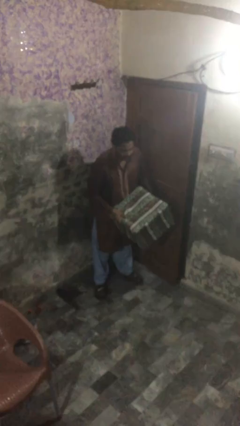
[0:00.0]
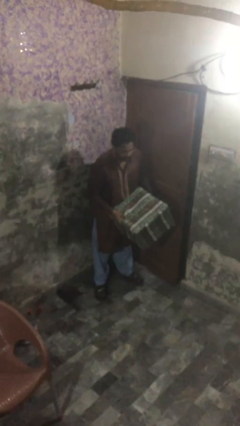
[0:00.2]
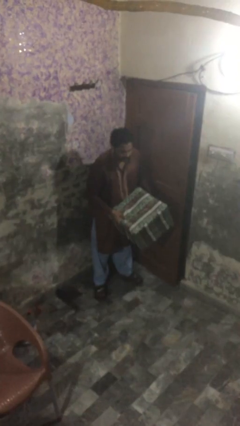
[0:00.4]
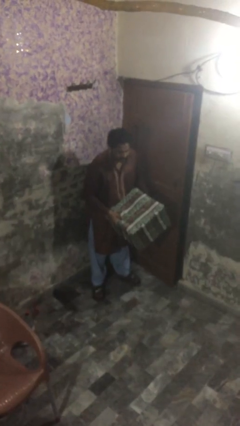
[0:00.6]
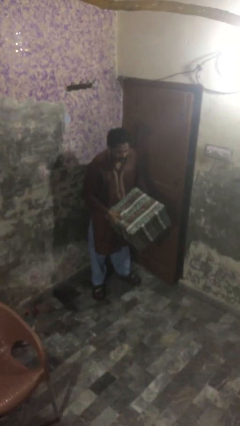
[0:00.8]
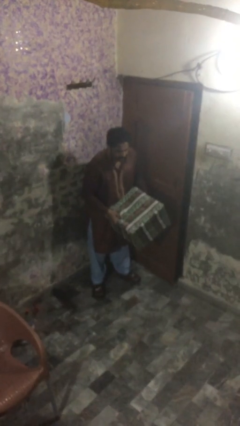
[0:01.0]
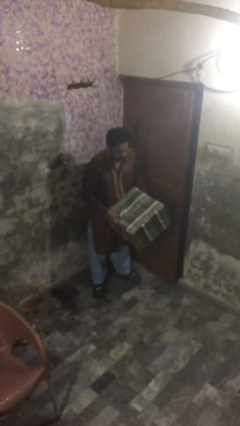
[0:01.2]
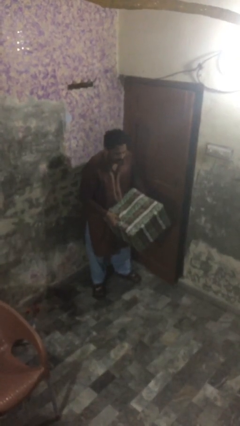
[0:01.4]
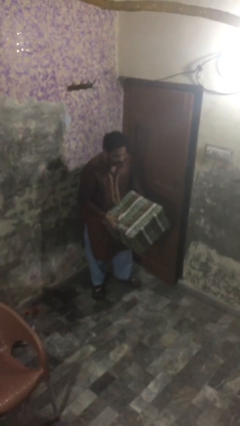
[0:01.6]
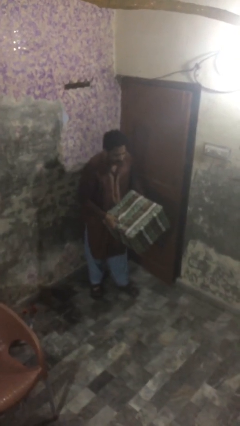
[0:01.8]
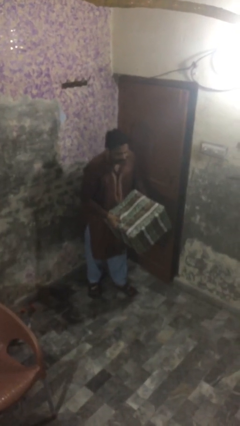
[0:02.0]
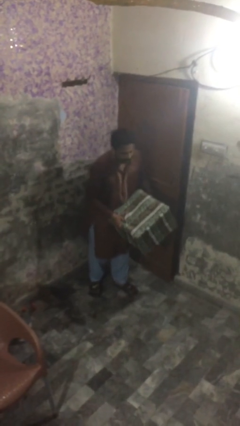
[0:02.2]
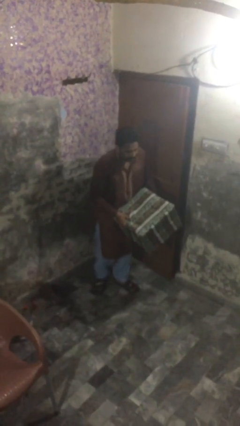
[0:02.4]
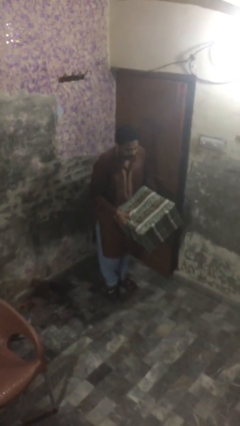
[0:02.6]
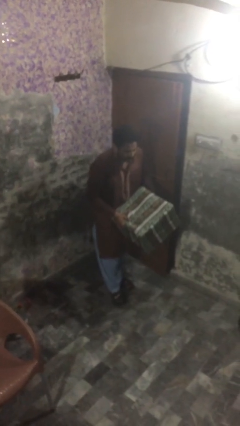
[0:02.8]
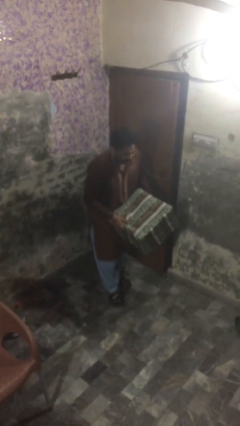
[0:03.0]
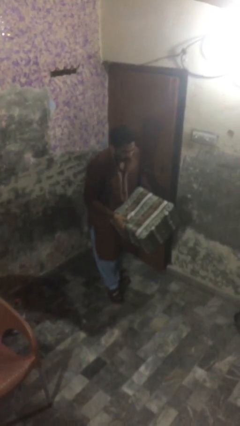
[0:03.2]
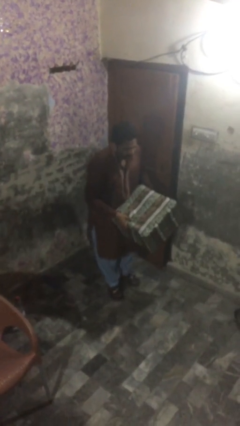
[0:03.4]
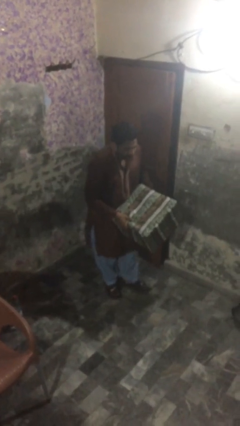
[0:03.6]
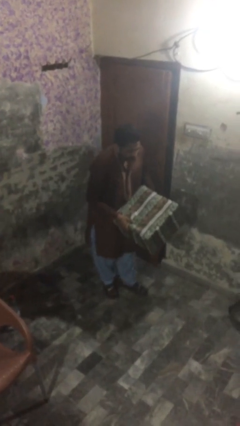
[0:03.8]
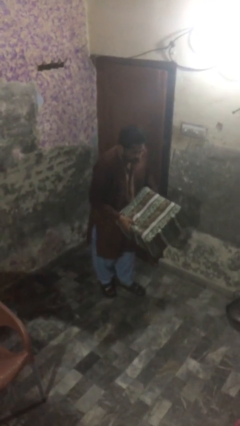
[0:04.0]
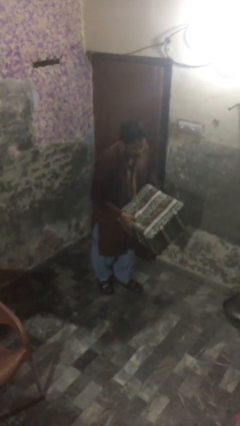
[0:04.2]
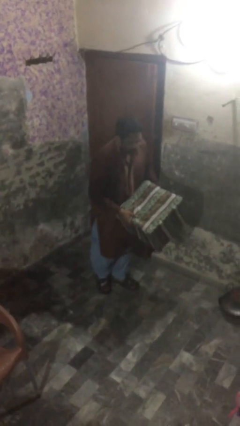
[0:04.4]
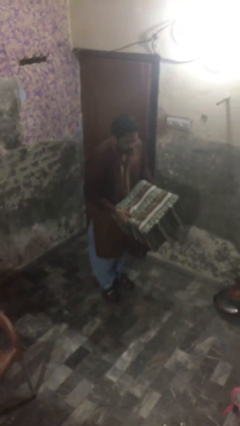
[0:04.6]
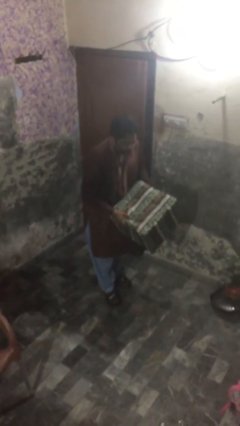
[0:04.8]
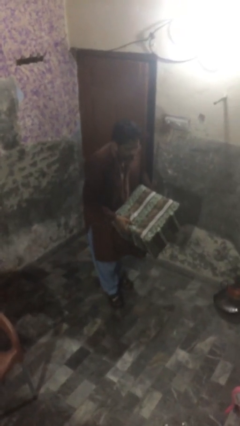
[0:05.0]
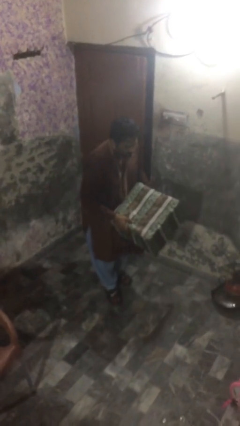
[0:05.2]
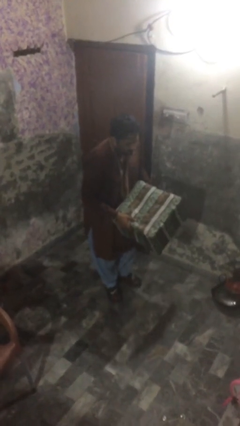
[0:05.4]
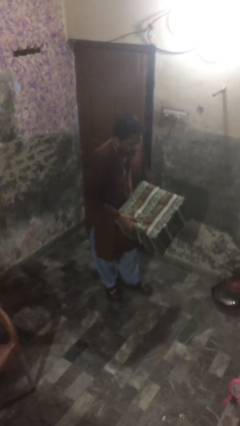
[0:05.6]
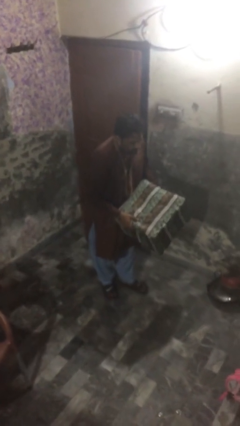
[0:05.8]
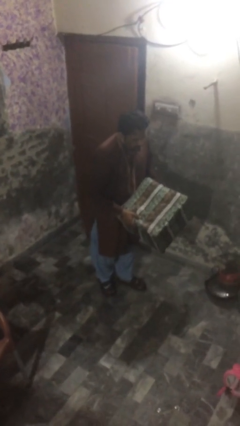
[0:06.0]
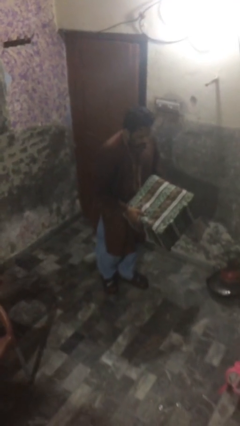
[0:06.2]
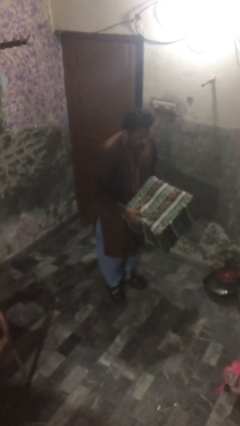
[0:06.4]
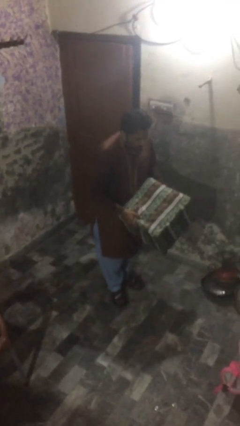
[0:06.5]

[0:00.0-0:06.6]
person carries heavy object

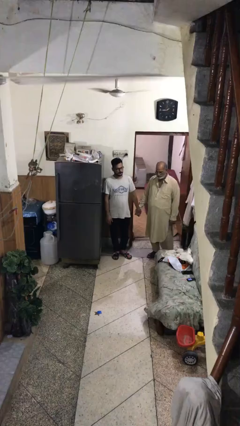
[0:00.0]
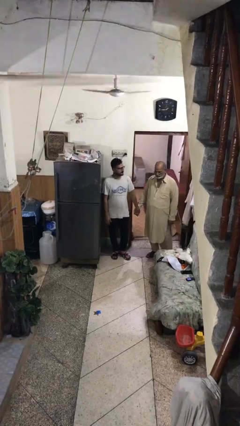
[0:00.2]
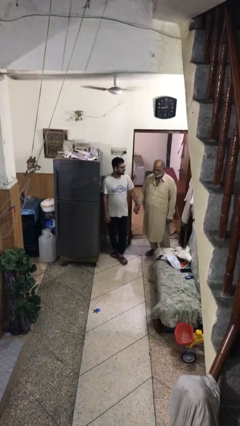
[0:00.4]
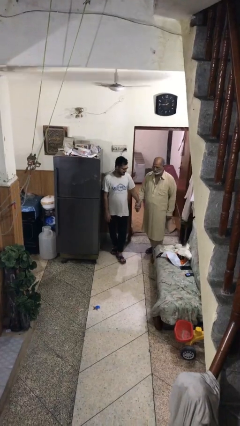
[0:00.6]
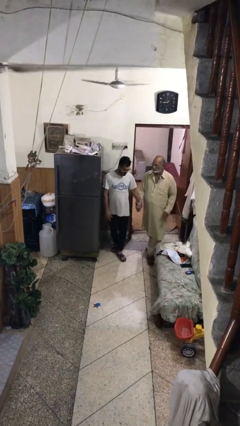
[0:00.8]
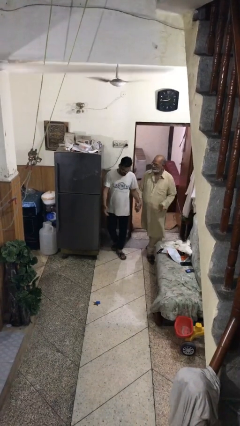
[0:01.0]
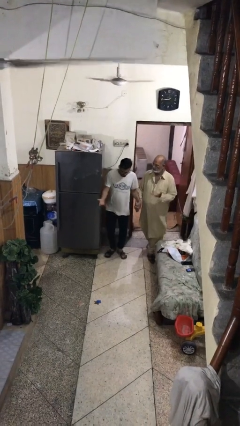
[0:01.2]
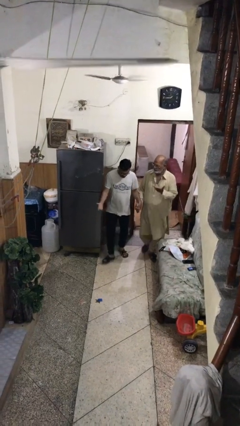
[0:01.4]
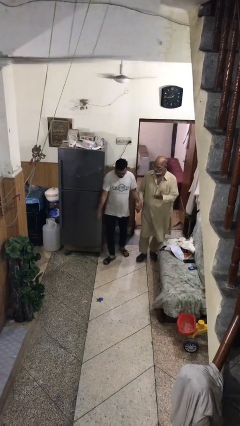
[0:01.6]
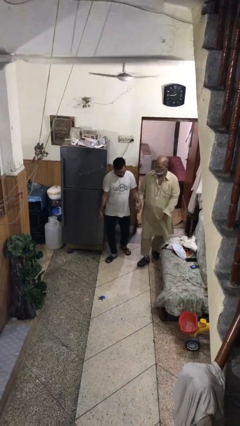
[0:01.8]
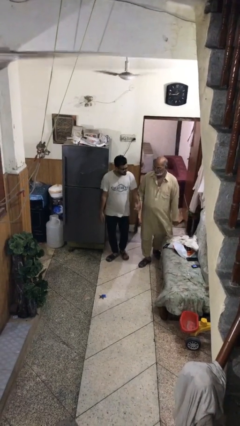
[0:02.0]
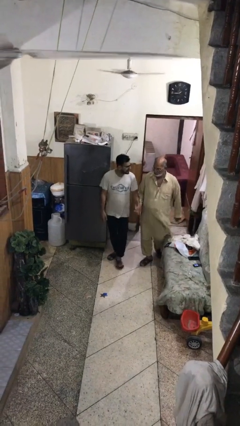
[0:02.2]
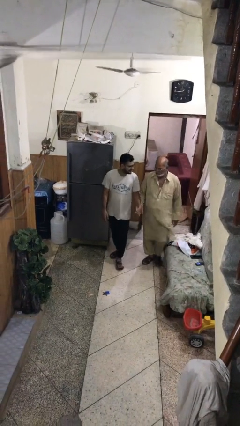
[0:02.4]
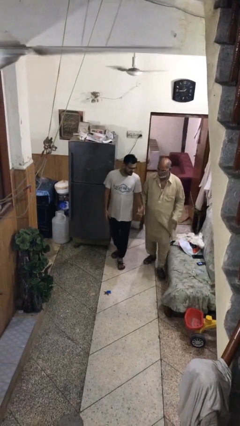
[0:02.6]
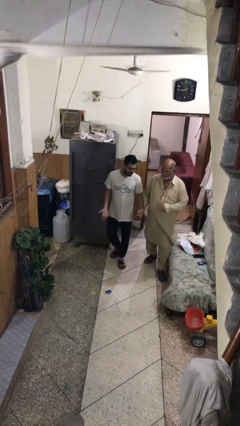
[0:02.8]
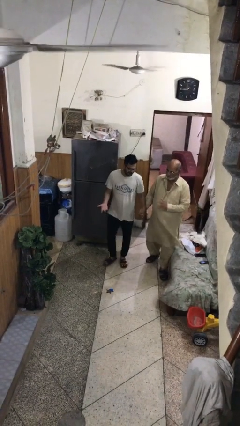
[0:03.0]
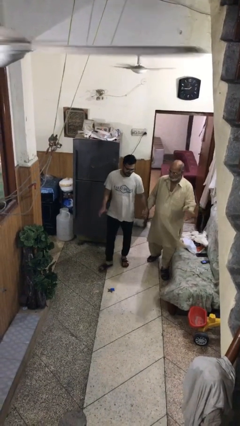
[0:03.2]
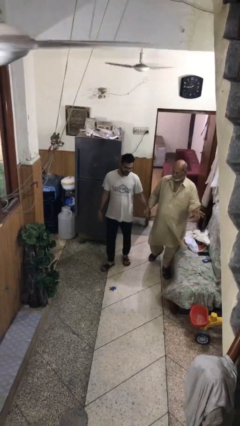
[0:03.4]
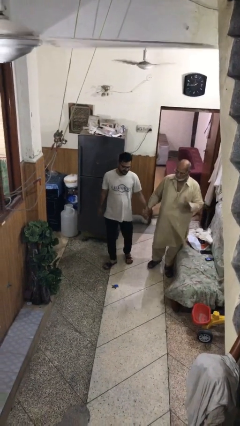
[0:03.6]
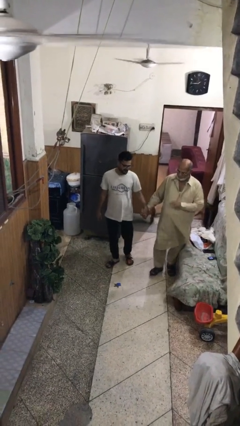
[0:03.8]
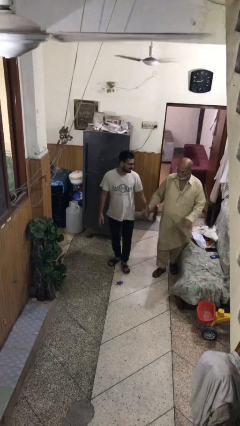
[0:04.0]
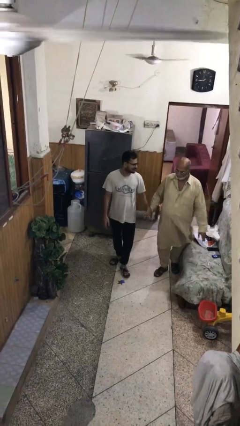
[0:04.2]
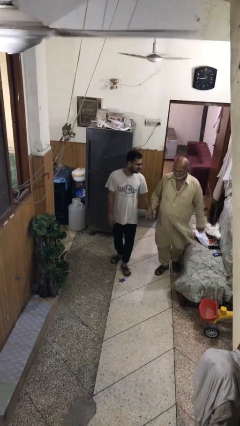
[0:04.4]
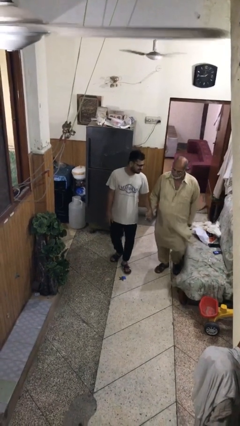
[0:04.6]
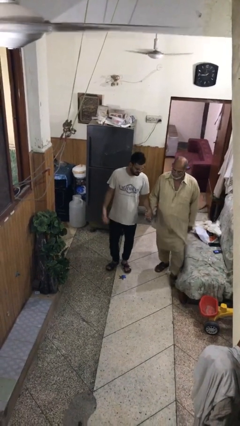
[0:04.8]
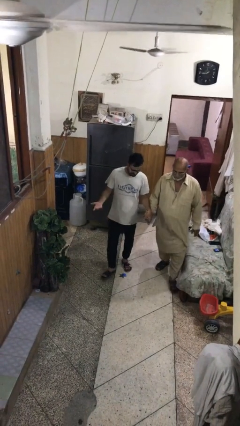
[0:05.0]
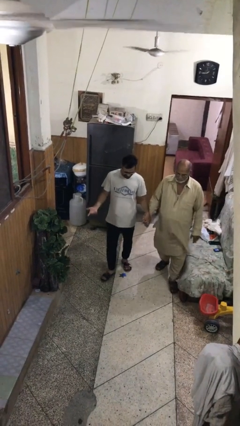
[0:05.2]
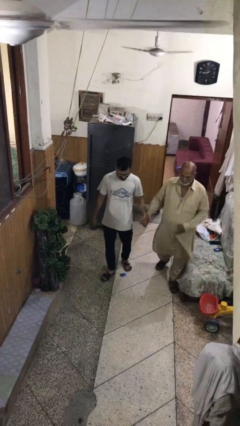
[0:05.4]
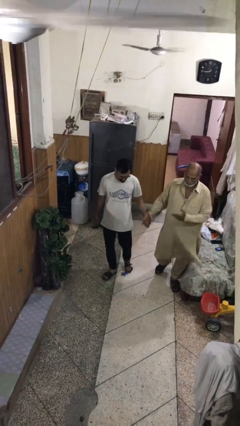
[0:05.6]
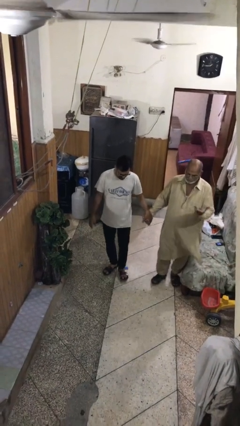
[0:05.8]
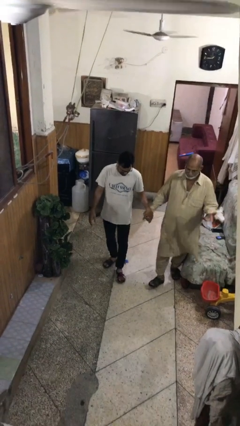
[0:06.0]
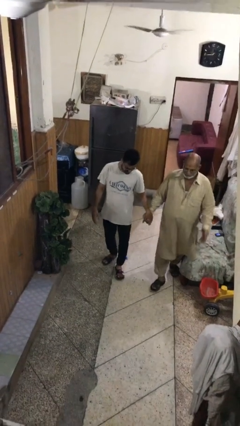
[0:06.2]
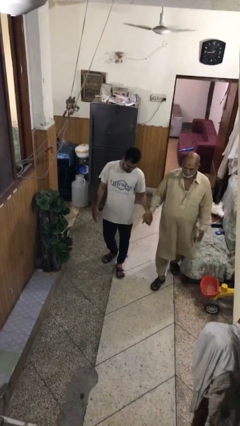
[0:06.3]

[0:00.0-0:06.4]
person holds hand

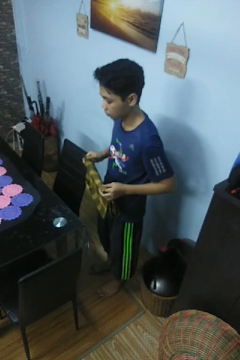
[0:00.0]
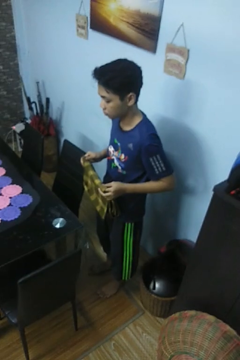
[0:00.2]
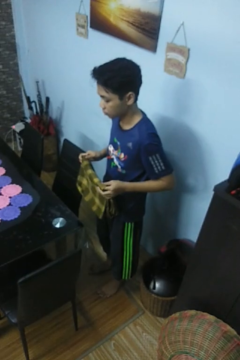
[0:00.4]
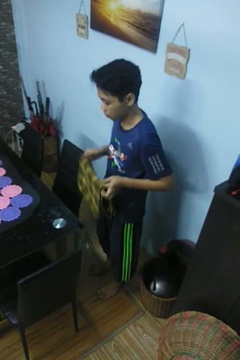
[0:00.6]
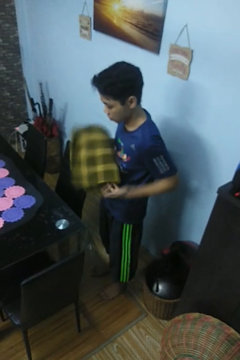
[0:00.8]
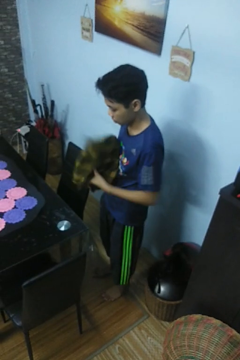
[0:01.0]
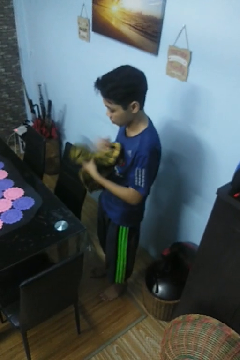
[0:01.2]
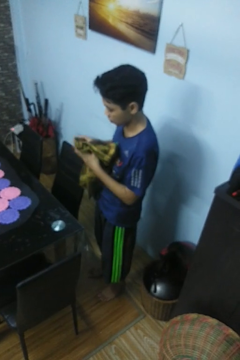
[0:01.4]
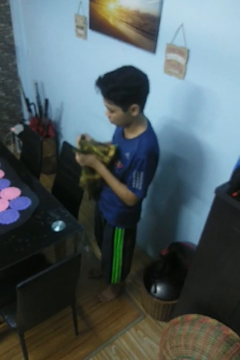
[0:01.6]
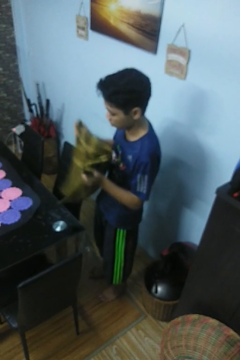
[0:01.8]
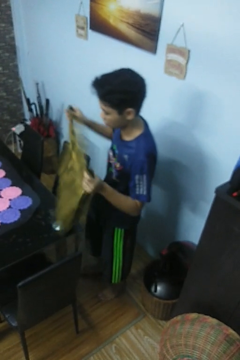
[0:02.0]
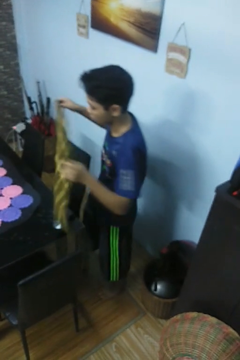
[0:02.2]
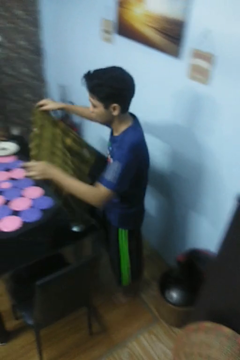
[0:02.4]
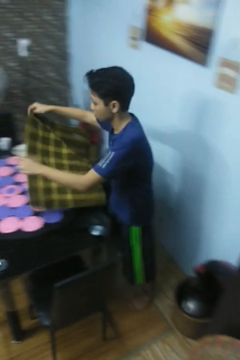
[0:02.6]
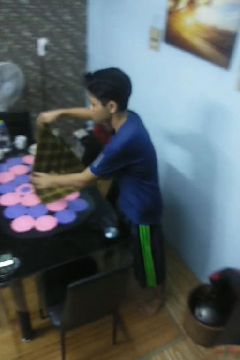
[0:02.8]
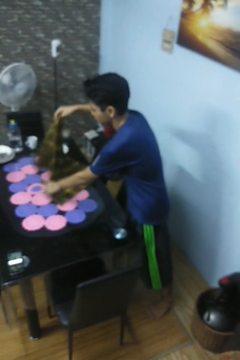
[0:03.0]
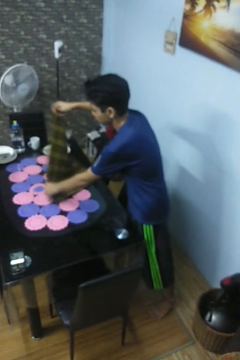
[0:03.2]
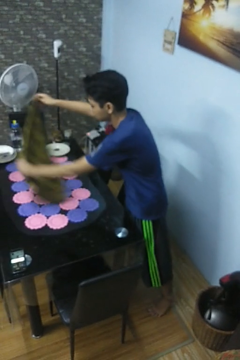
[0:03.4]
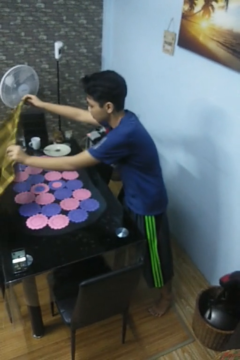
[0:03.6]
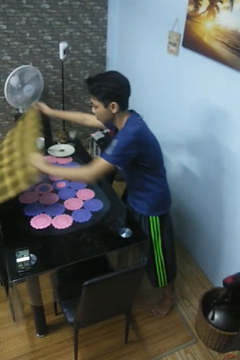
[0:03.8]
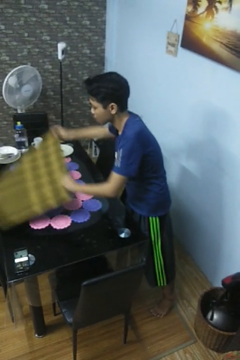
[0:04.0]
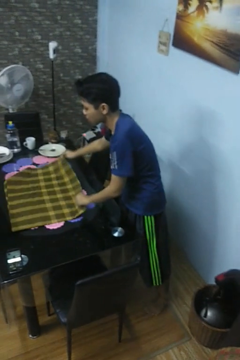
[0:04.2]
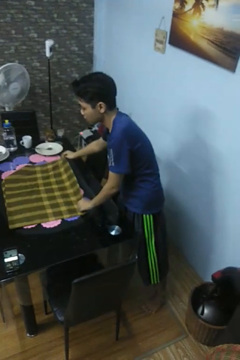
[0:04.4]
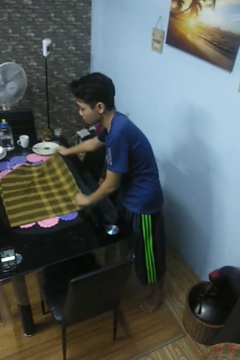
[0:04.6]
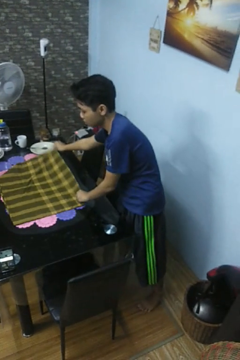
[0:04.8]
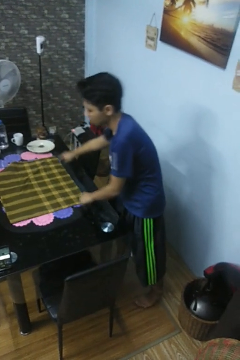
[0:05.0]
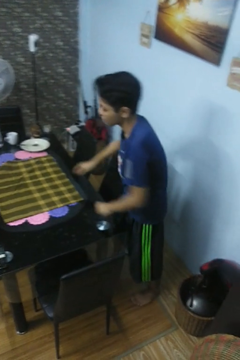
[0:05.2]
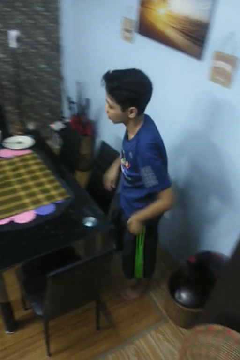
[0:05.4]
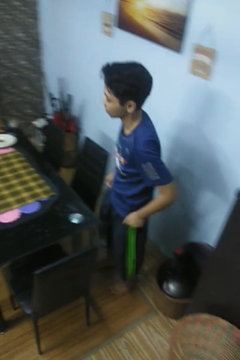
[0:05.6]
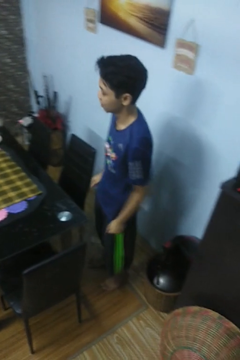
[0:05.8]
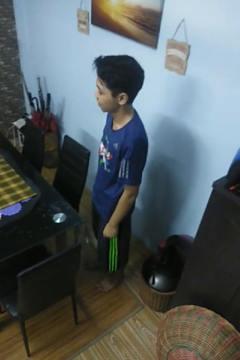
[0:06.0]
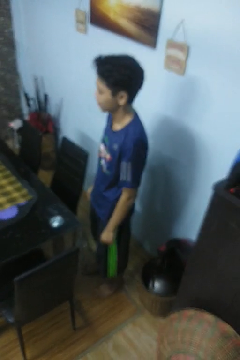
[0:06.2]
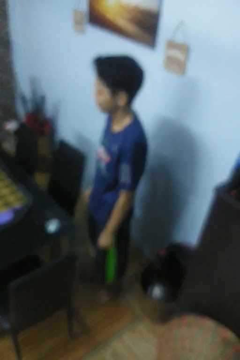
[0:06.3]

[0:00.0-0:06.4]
person spreads tablecloth
